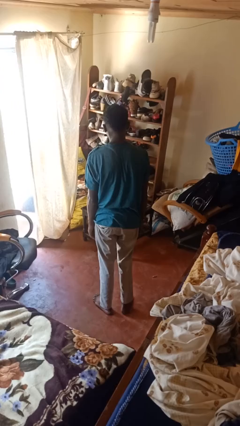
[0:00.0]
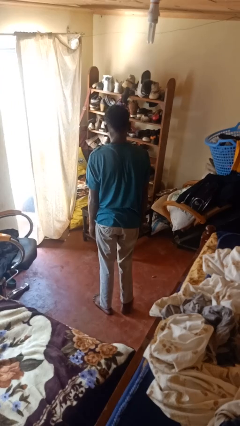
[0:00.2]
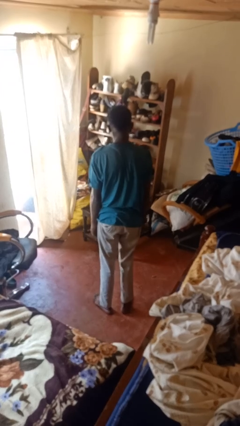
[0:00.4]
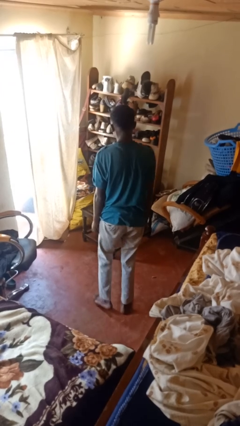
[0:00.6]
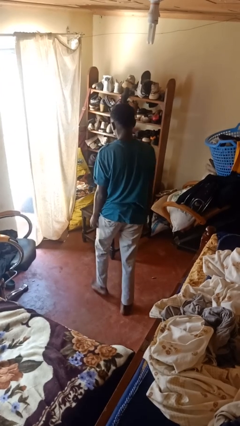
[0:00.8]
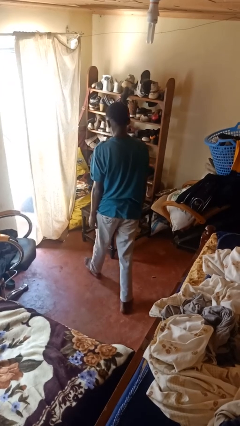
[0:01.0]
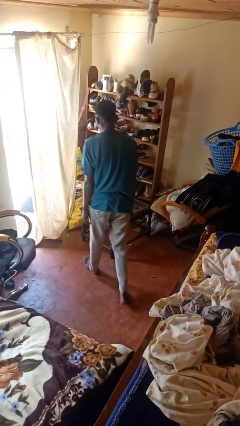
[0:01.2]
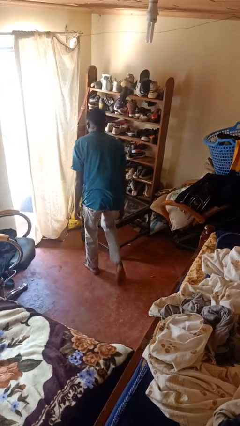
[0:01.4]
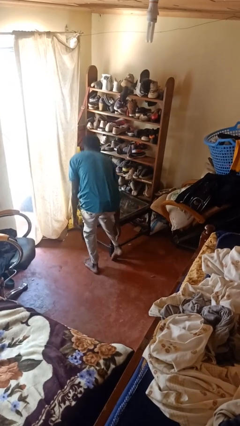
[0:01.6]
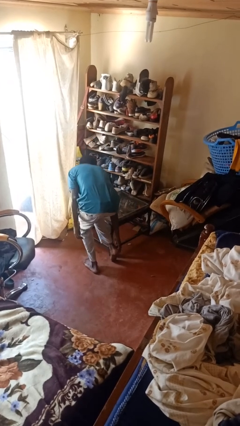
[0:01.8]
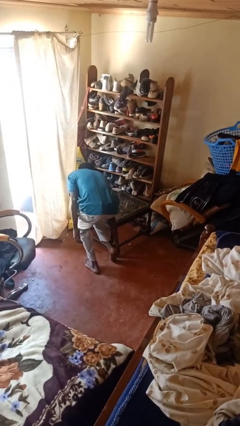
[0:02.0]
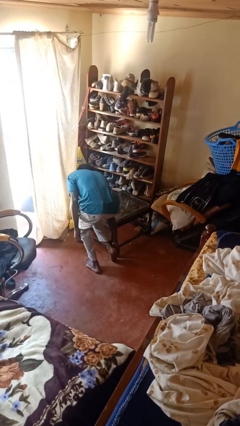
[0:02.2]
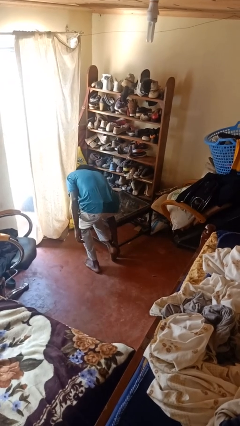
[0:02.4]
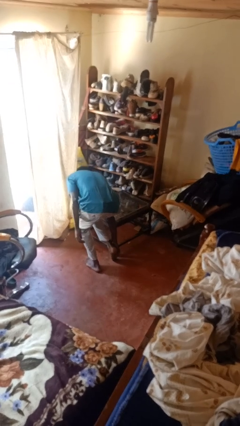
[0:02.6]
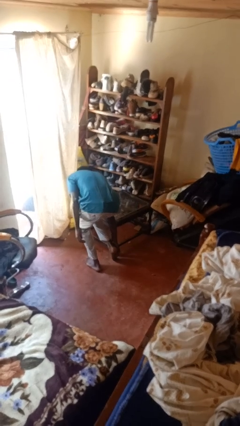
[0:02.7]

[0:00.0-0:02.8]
person stubs toe

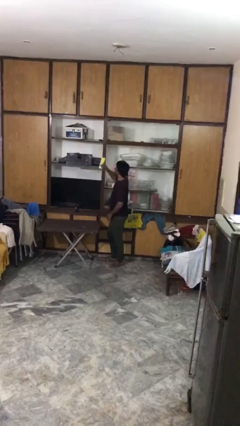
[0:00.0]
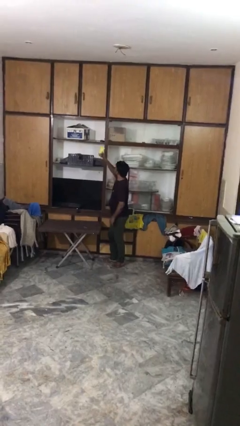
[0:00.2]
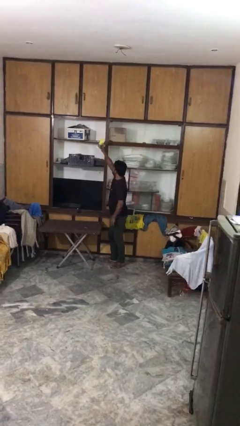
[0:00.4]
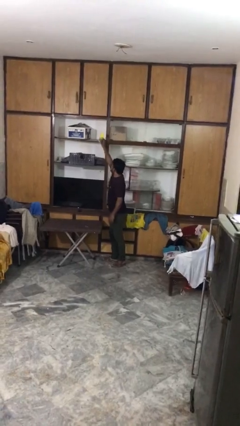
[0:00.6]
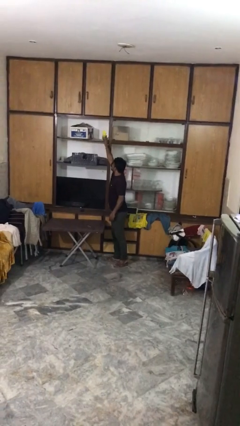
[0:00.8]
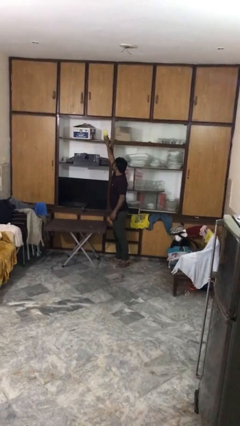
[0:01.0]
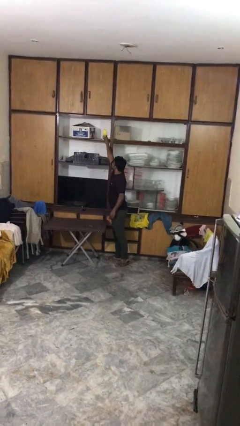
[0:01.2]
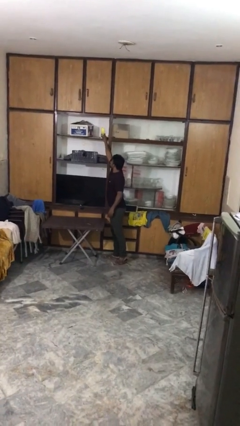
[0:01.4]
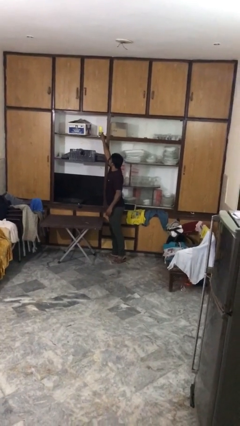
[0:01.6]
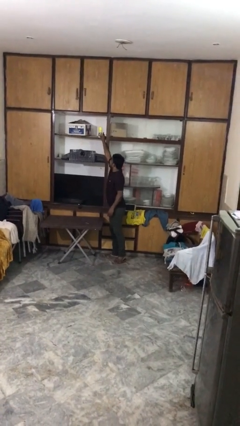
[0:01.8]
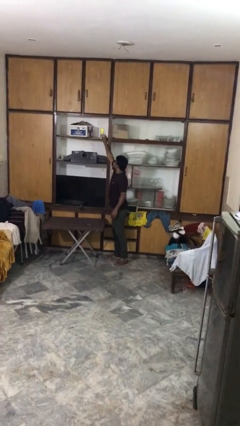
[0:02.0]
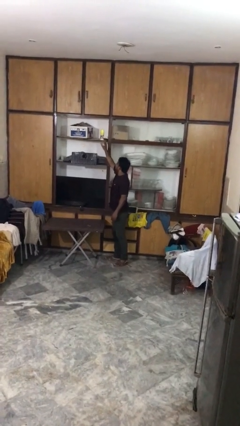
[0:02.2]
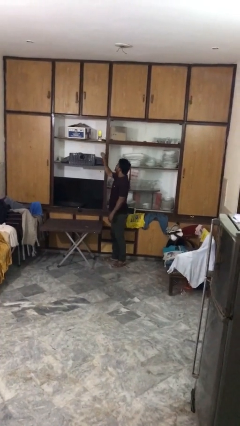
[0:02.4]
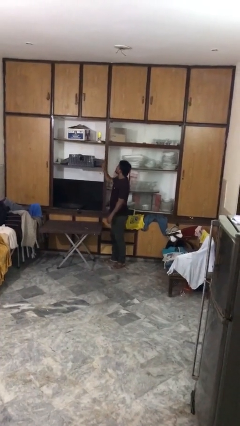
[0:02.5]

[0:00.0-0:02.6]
person puts down object on shelf

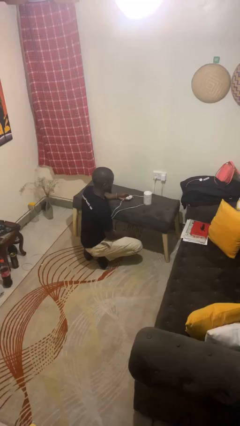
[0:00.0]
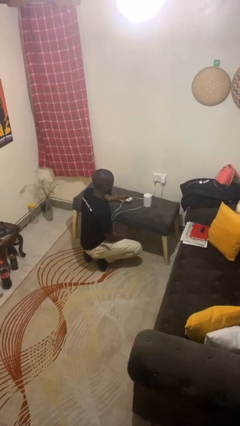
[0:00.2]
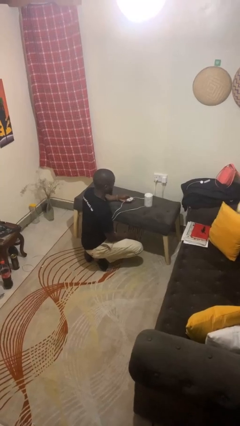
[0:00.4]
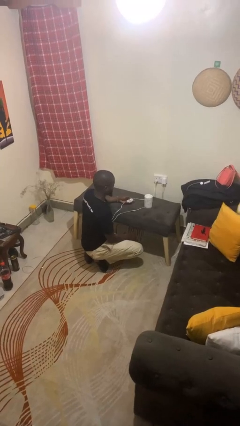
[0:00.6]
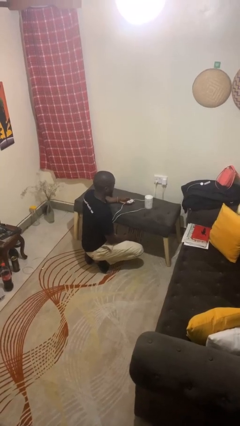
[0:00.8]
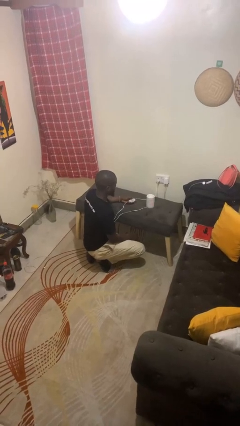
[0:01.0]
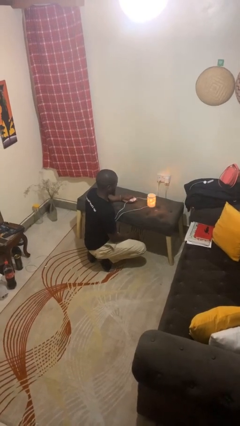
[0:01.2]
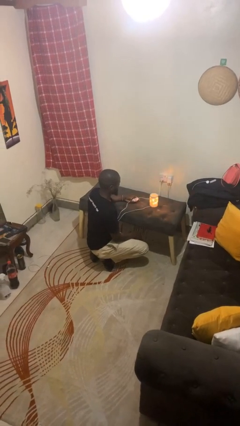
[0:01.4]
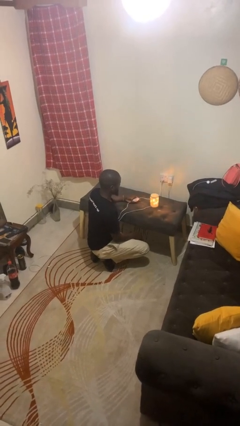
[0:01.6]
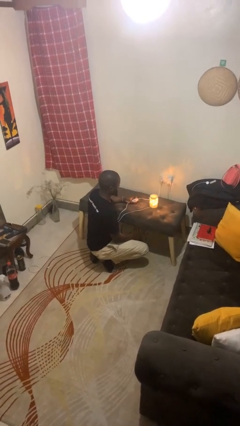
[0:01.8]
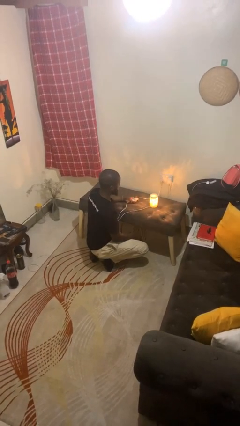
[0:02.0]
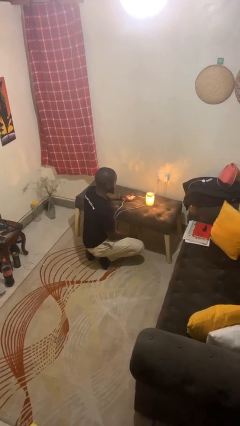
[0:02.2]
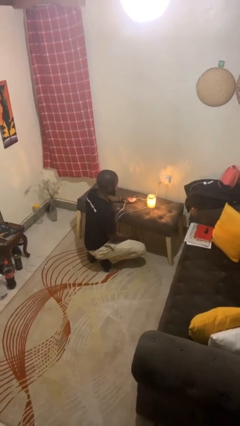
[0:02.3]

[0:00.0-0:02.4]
person turns on lamp

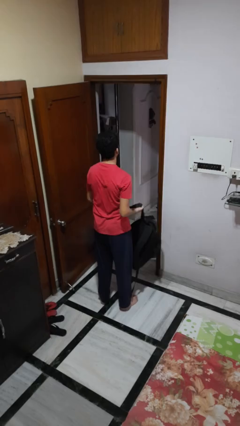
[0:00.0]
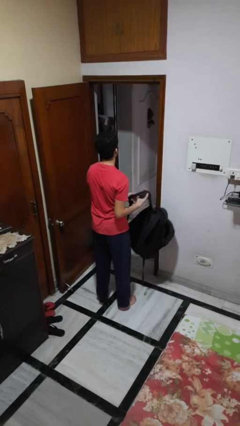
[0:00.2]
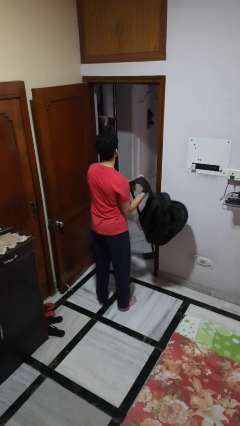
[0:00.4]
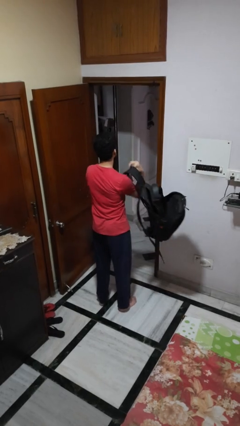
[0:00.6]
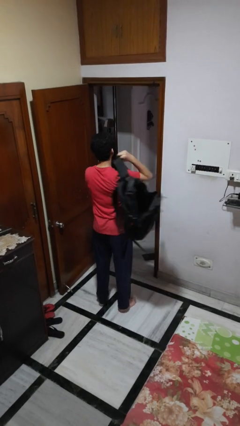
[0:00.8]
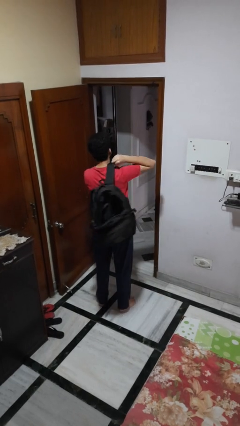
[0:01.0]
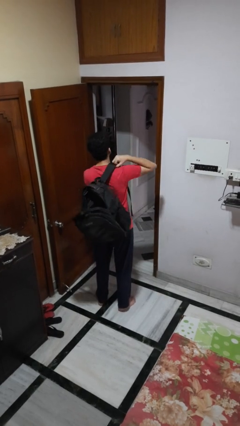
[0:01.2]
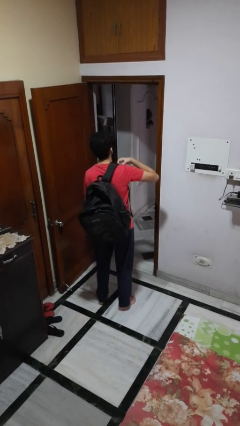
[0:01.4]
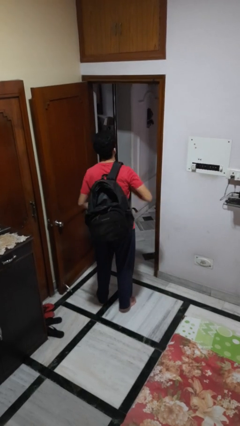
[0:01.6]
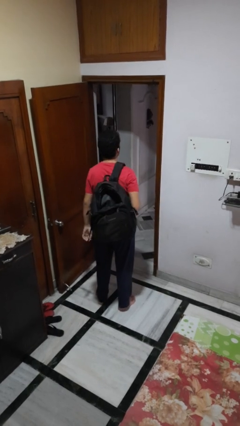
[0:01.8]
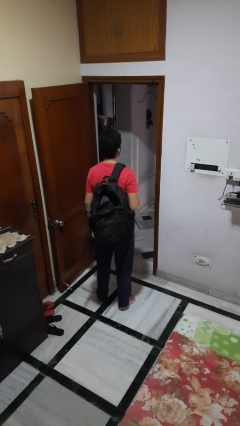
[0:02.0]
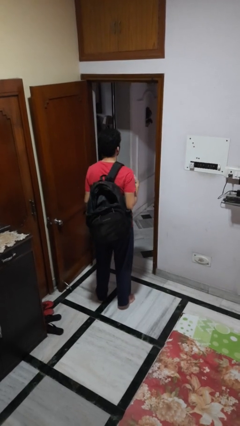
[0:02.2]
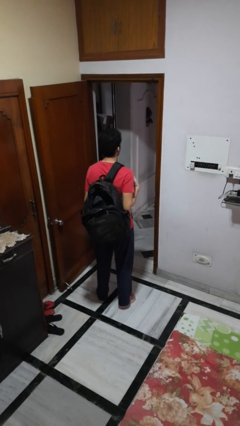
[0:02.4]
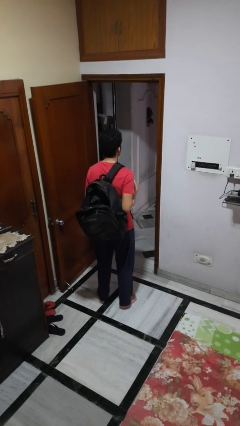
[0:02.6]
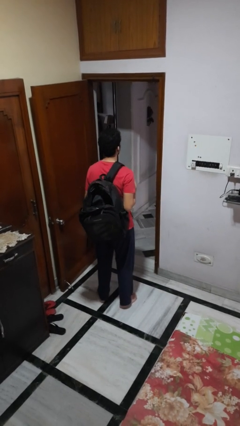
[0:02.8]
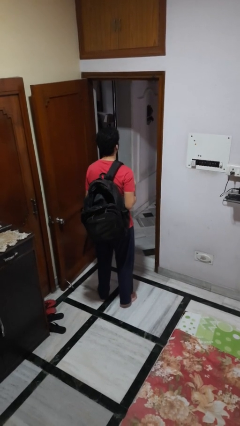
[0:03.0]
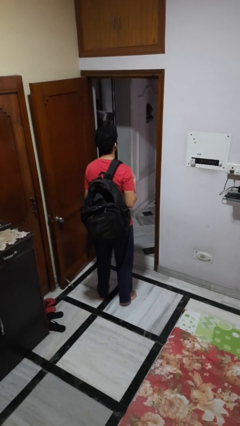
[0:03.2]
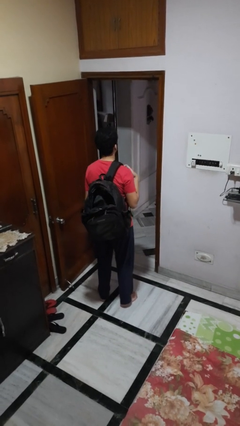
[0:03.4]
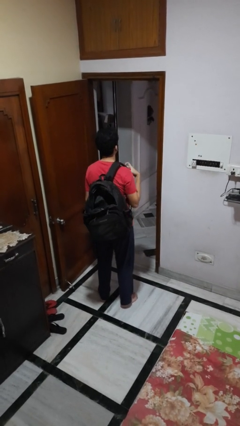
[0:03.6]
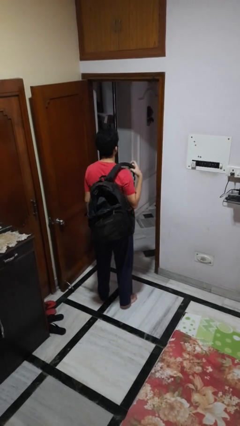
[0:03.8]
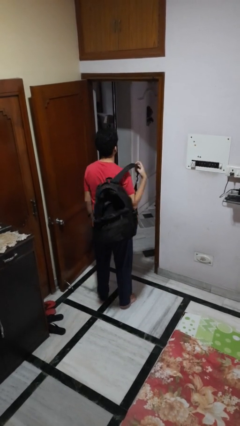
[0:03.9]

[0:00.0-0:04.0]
person puts on backpack

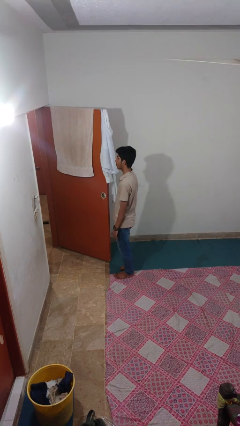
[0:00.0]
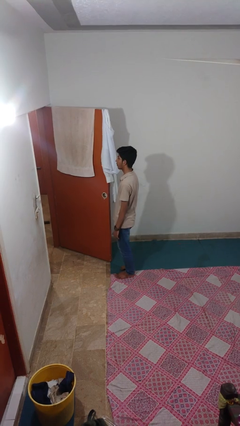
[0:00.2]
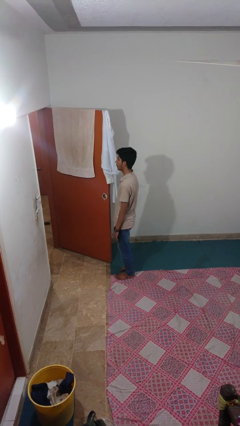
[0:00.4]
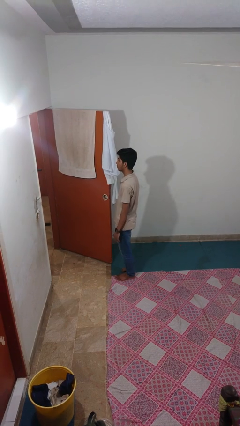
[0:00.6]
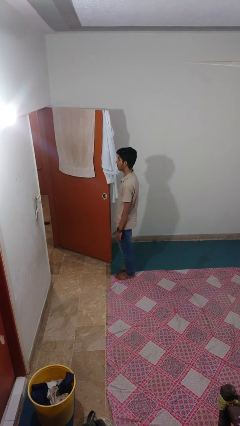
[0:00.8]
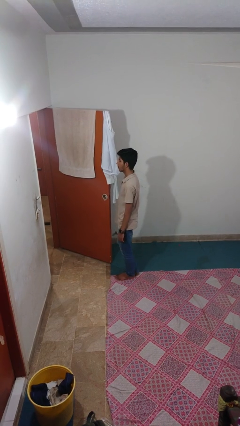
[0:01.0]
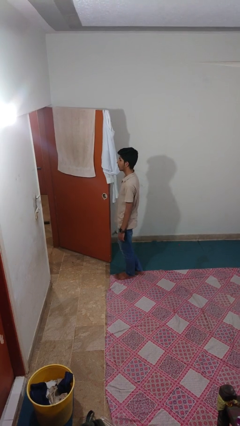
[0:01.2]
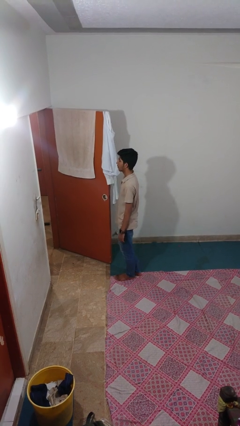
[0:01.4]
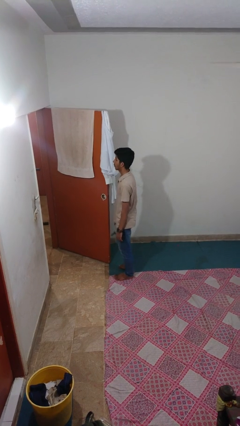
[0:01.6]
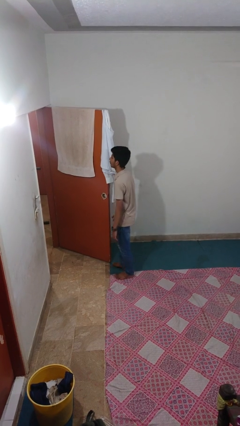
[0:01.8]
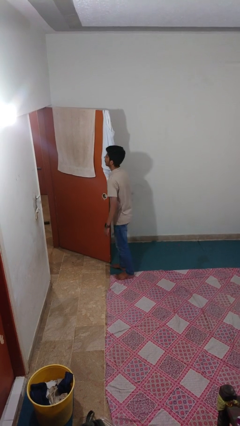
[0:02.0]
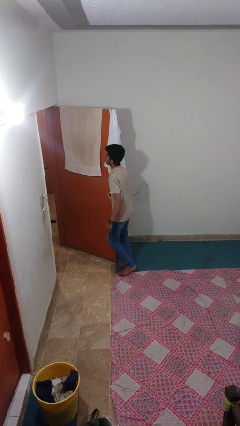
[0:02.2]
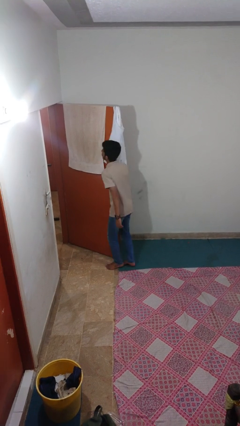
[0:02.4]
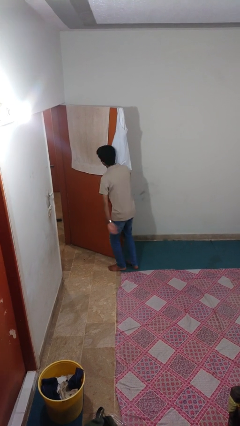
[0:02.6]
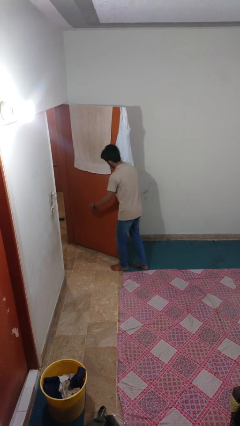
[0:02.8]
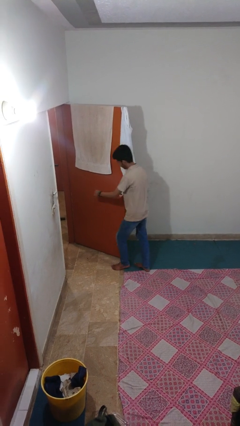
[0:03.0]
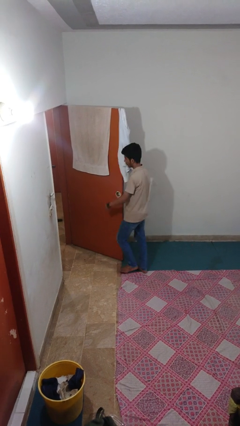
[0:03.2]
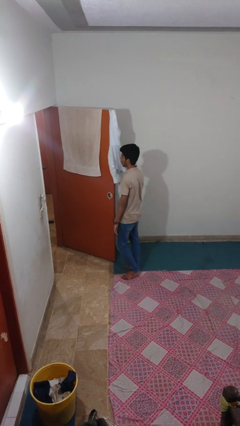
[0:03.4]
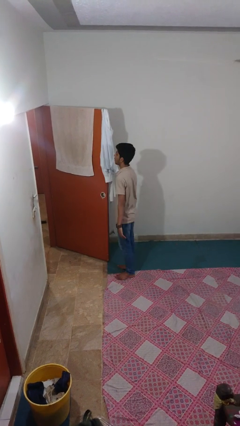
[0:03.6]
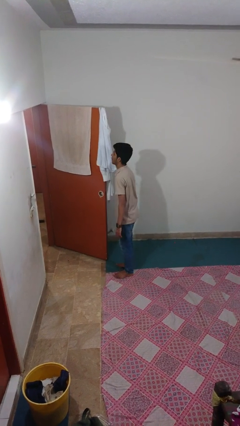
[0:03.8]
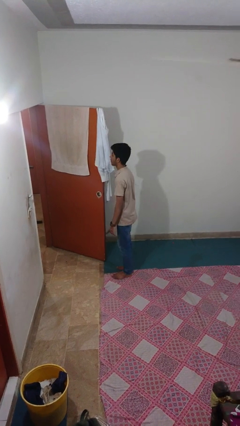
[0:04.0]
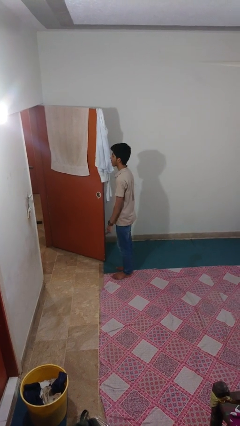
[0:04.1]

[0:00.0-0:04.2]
person bumps into wall

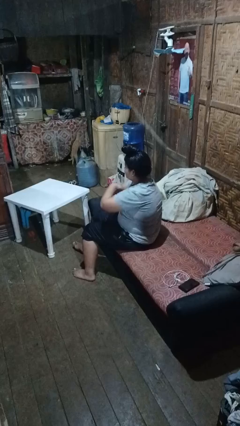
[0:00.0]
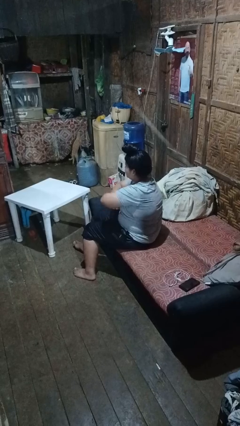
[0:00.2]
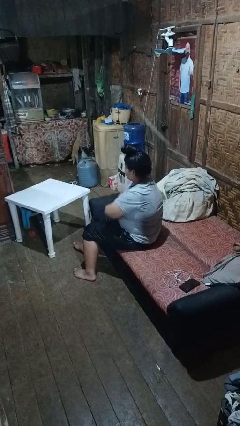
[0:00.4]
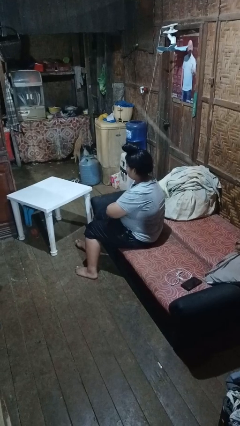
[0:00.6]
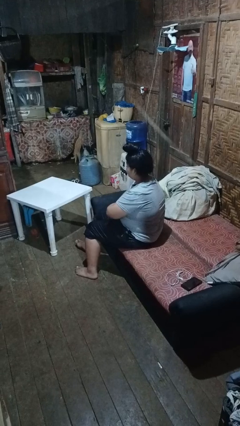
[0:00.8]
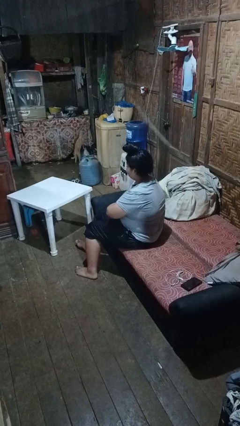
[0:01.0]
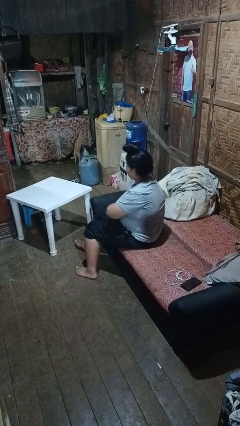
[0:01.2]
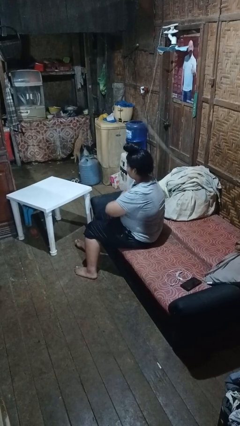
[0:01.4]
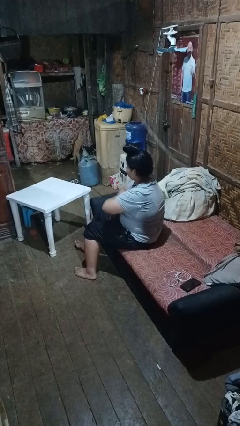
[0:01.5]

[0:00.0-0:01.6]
person crosses arms
